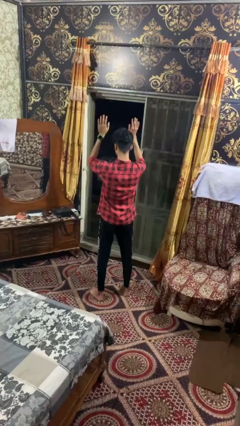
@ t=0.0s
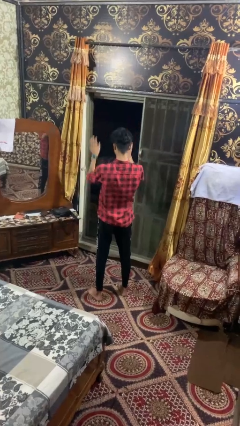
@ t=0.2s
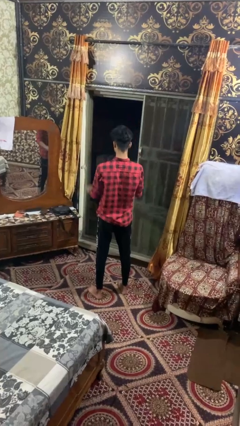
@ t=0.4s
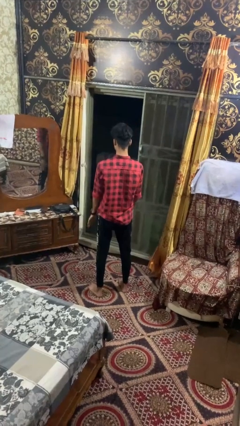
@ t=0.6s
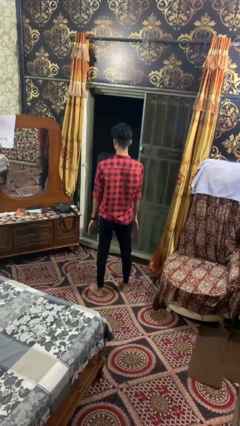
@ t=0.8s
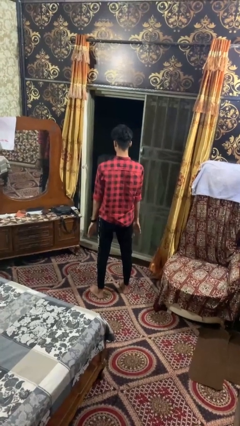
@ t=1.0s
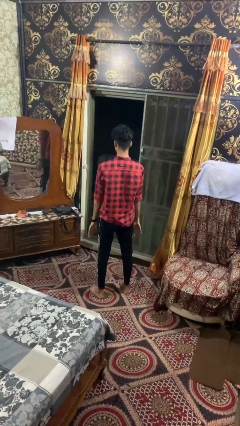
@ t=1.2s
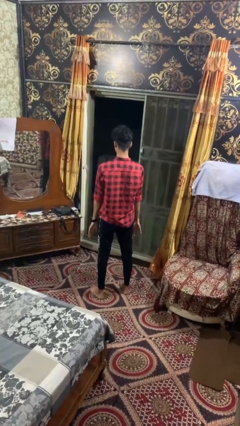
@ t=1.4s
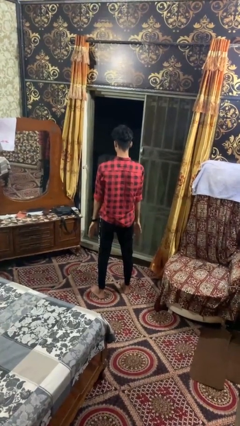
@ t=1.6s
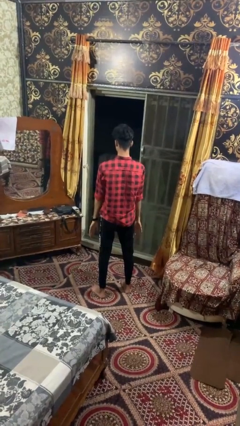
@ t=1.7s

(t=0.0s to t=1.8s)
person gestures swipe down

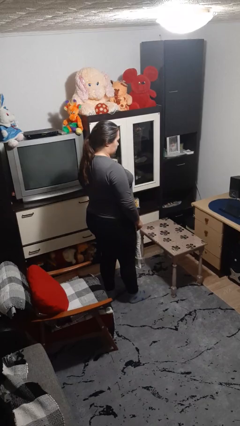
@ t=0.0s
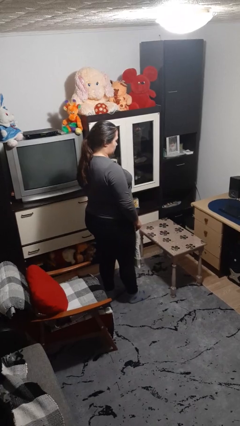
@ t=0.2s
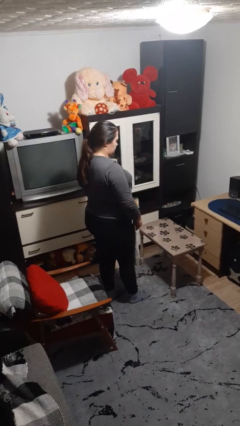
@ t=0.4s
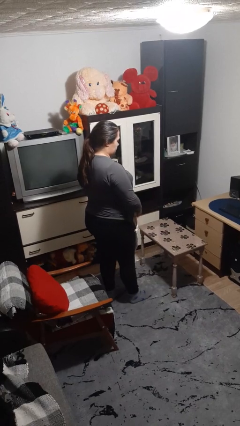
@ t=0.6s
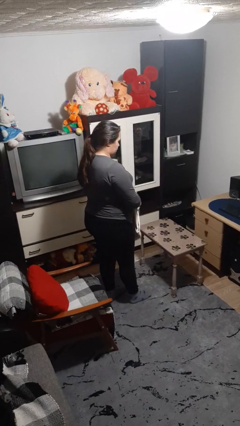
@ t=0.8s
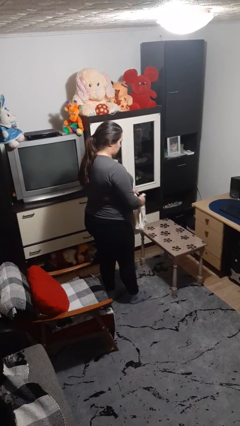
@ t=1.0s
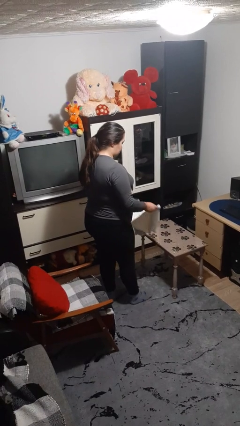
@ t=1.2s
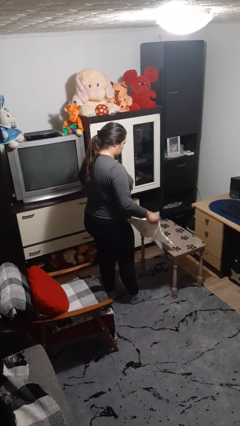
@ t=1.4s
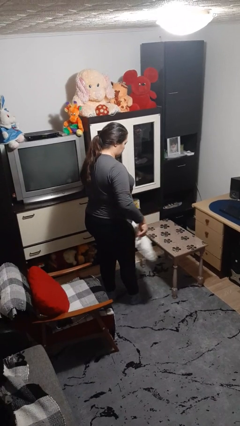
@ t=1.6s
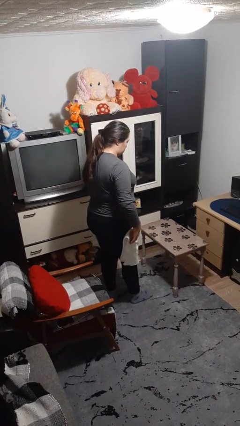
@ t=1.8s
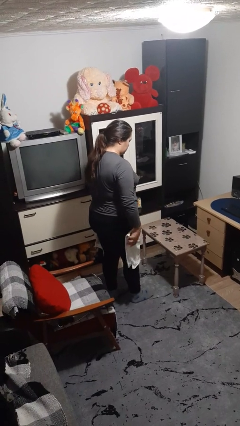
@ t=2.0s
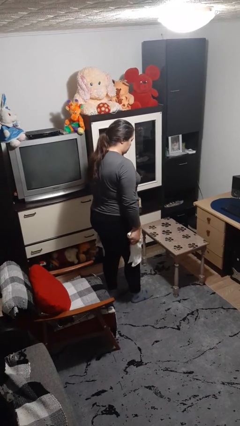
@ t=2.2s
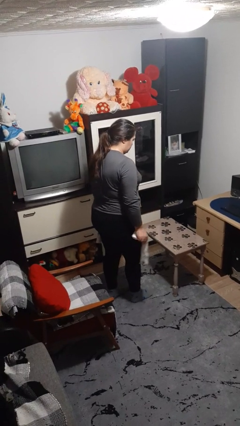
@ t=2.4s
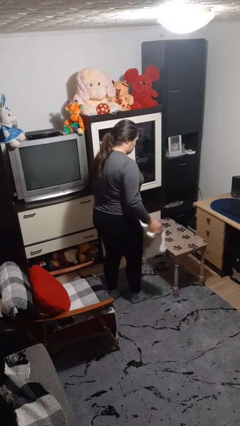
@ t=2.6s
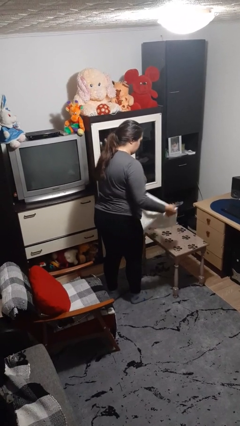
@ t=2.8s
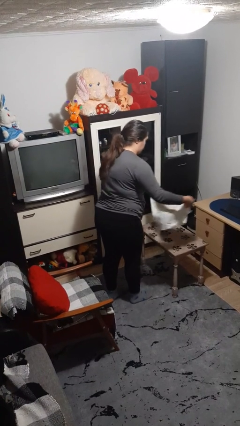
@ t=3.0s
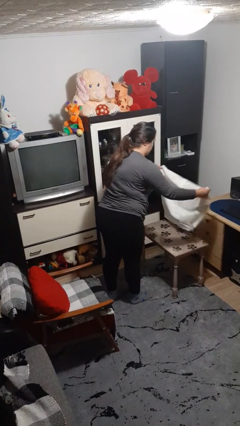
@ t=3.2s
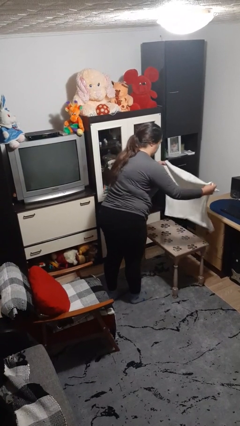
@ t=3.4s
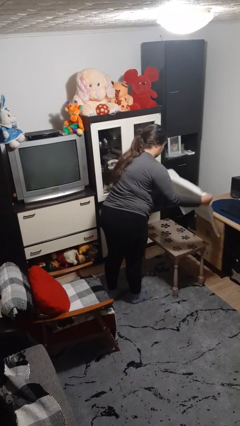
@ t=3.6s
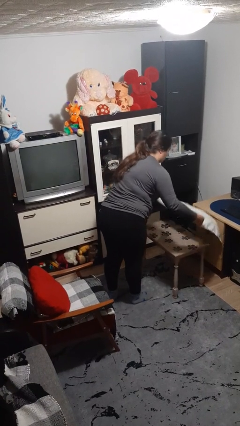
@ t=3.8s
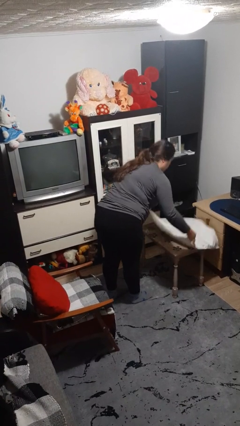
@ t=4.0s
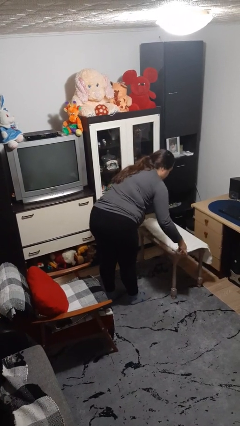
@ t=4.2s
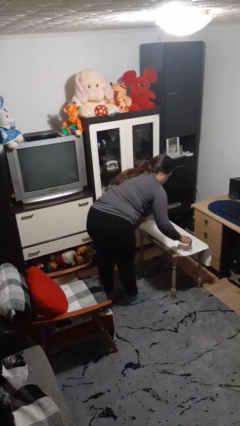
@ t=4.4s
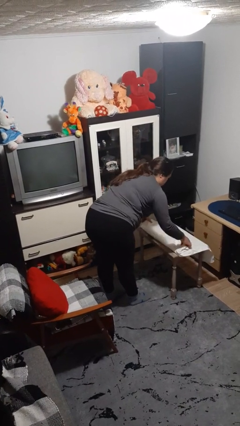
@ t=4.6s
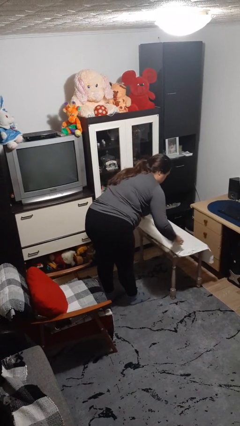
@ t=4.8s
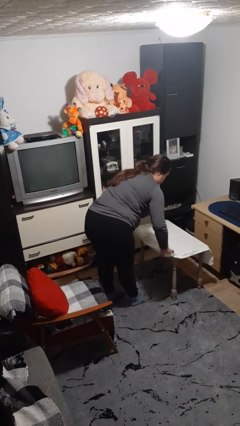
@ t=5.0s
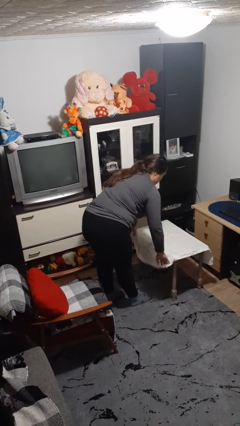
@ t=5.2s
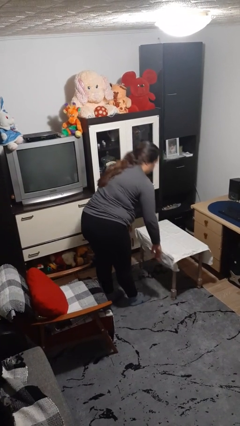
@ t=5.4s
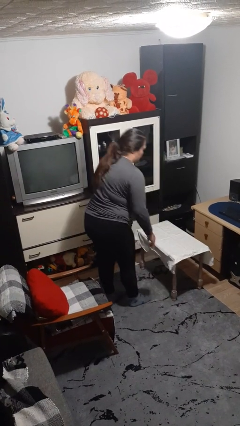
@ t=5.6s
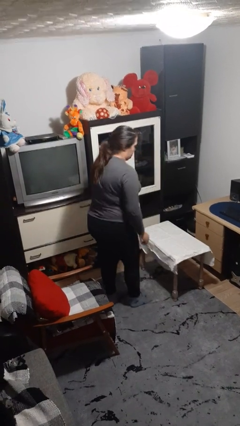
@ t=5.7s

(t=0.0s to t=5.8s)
person spreads tablecloth

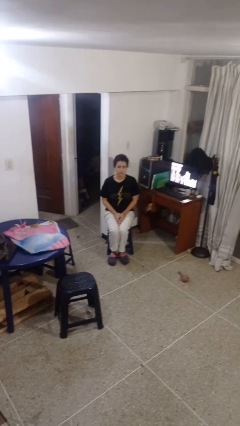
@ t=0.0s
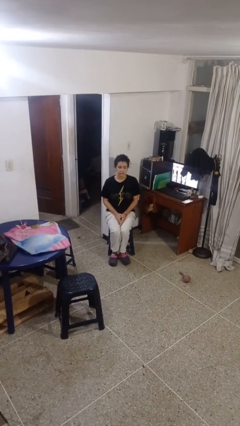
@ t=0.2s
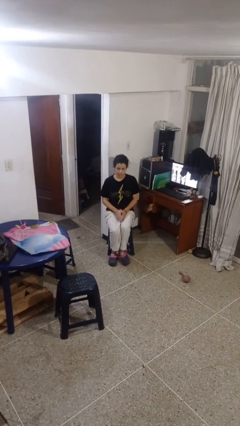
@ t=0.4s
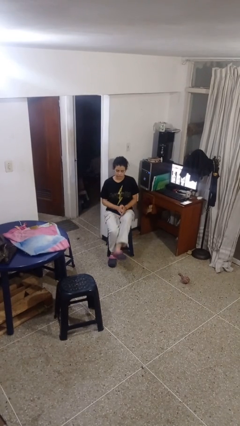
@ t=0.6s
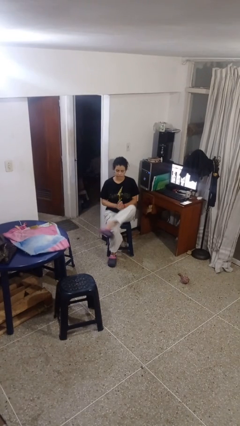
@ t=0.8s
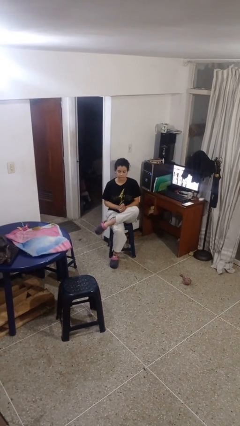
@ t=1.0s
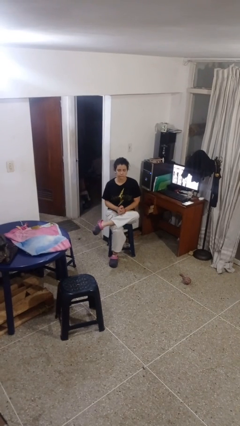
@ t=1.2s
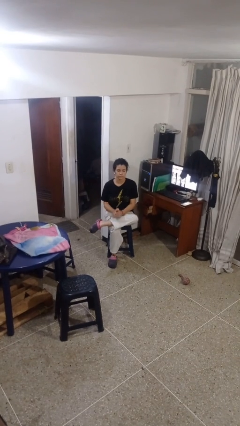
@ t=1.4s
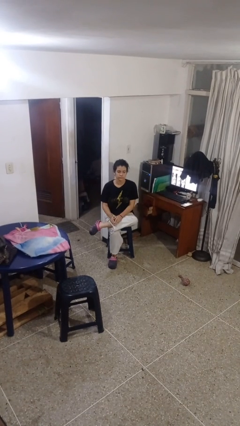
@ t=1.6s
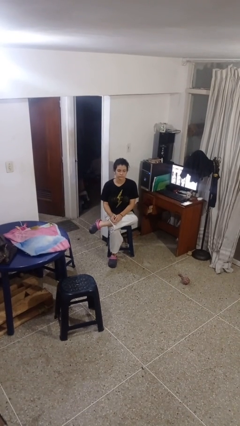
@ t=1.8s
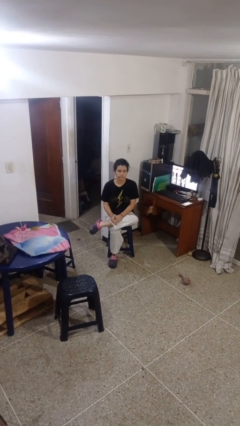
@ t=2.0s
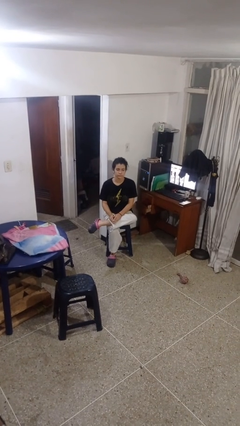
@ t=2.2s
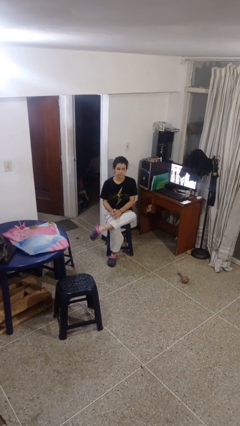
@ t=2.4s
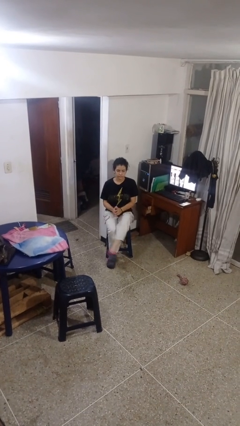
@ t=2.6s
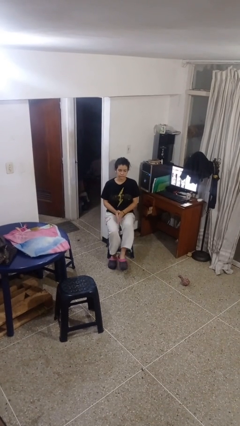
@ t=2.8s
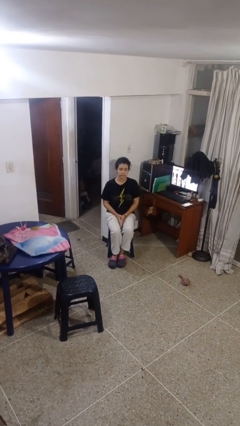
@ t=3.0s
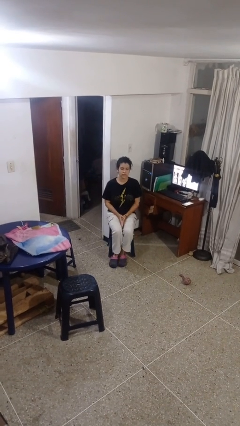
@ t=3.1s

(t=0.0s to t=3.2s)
person crosses legs

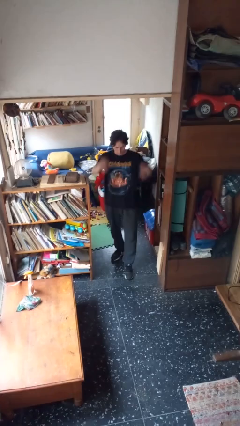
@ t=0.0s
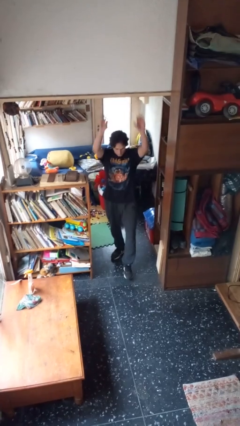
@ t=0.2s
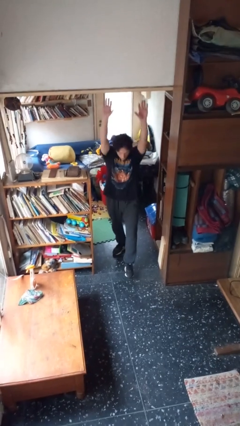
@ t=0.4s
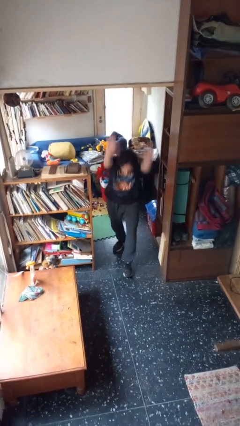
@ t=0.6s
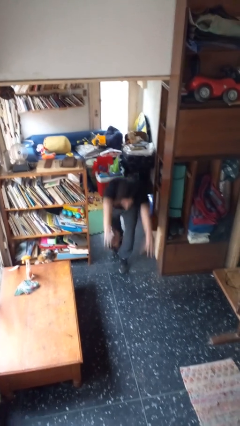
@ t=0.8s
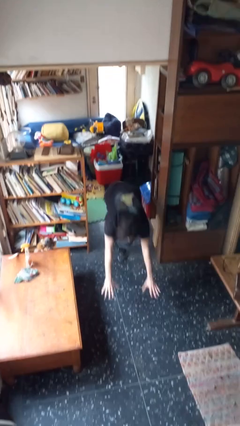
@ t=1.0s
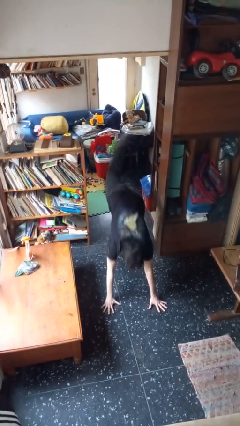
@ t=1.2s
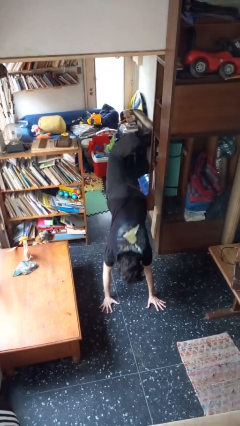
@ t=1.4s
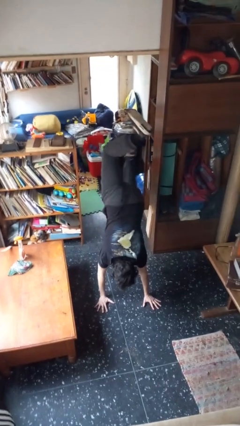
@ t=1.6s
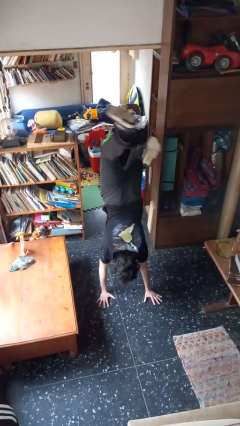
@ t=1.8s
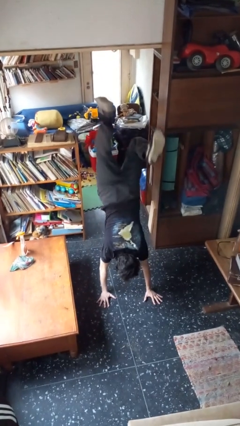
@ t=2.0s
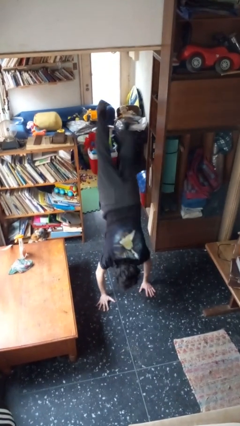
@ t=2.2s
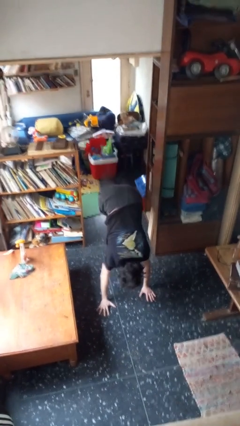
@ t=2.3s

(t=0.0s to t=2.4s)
person handstand

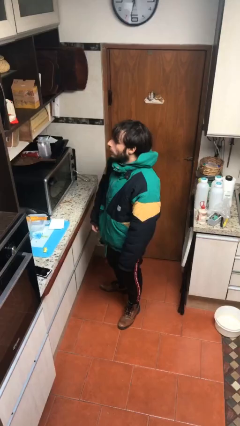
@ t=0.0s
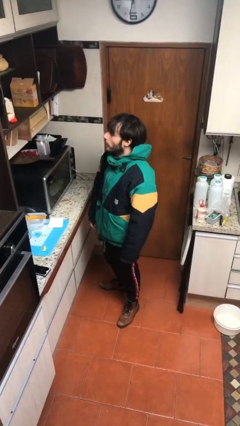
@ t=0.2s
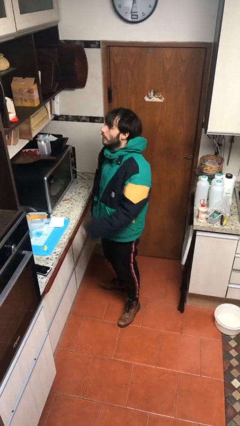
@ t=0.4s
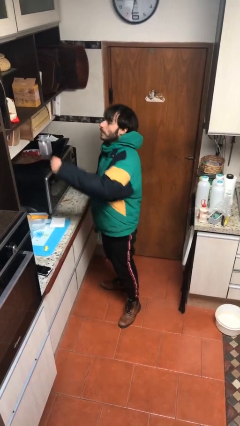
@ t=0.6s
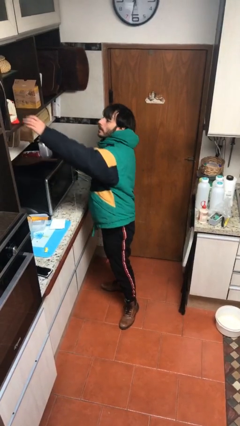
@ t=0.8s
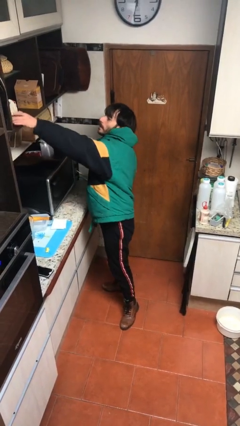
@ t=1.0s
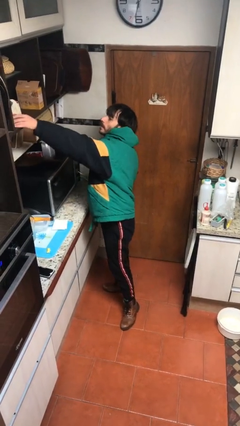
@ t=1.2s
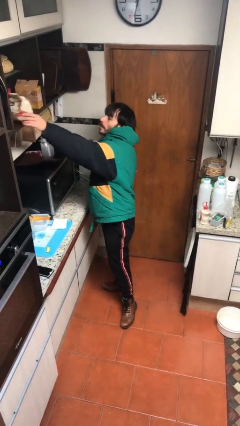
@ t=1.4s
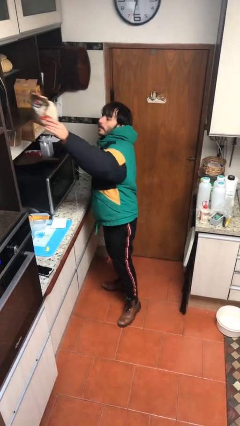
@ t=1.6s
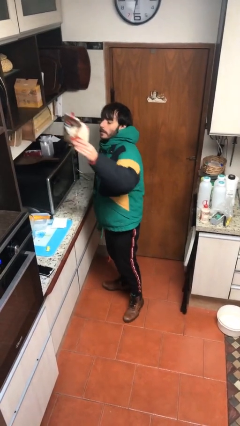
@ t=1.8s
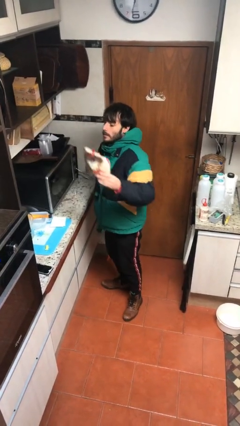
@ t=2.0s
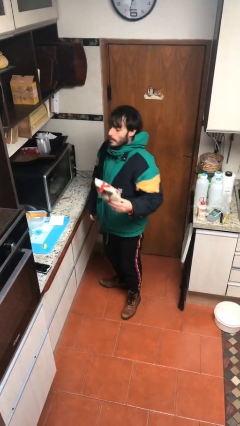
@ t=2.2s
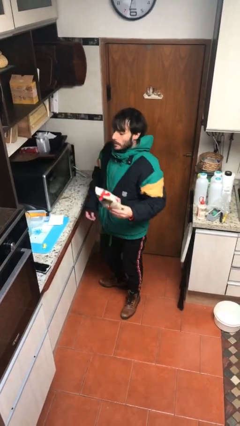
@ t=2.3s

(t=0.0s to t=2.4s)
person picks up object from cabinet

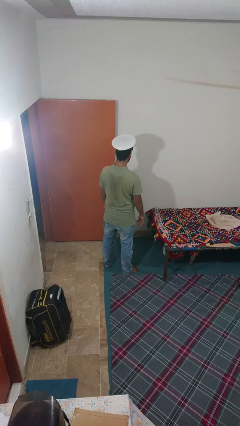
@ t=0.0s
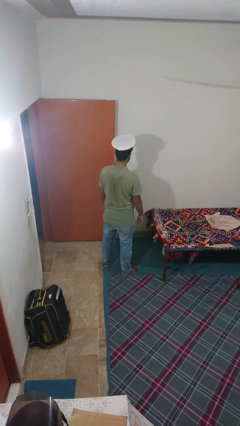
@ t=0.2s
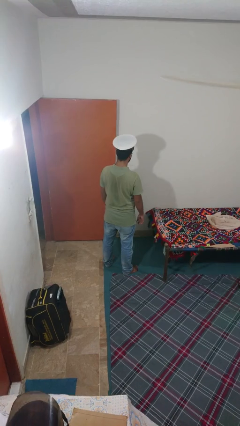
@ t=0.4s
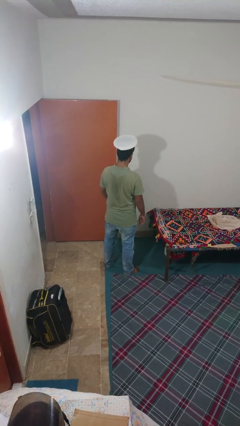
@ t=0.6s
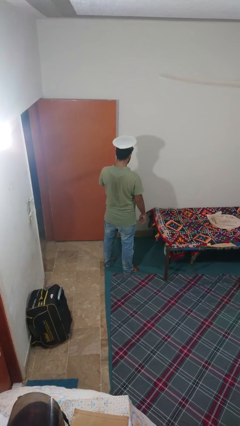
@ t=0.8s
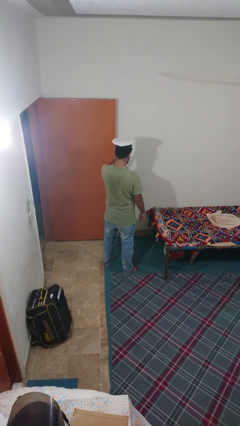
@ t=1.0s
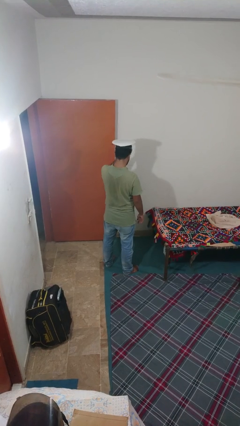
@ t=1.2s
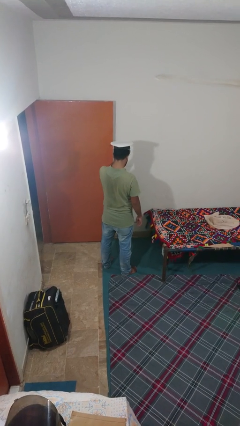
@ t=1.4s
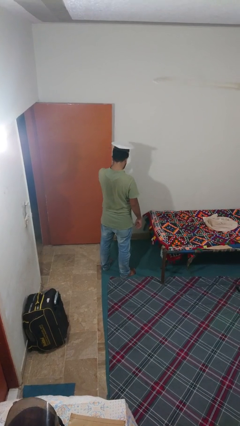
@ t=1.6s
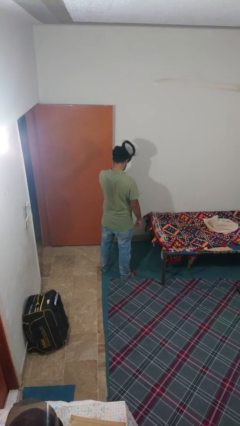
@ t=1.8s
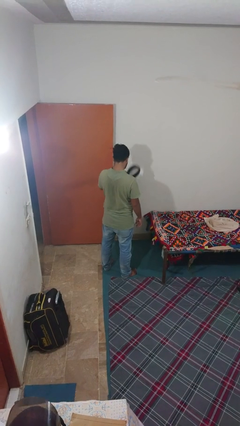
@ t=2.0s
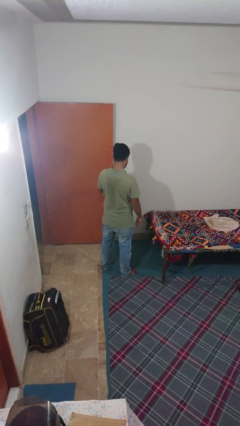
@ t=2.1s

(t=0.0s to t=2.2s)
person takes off hat
